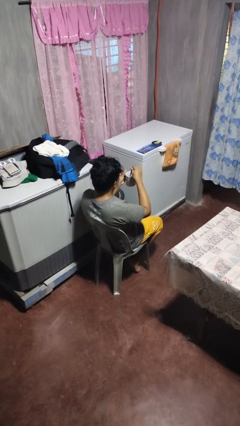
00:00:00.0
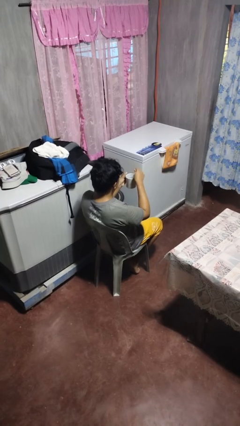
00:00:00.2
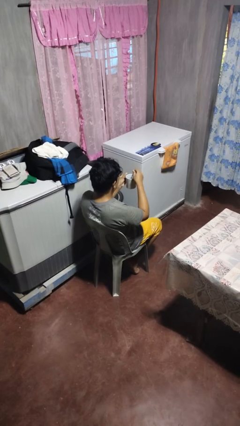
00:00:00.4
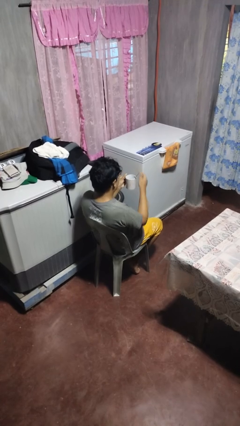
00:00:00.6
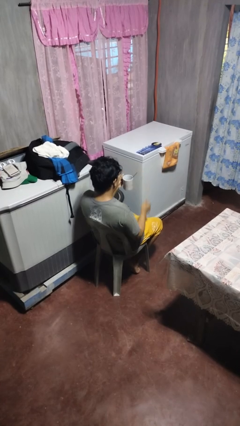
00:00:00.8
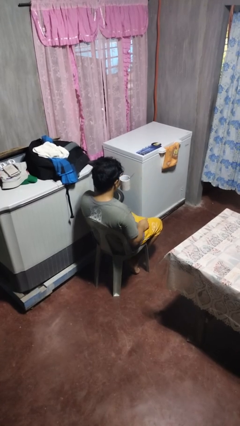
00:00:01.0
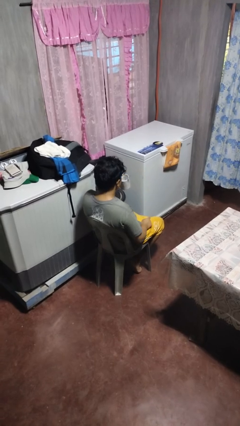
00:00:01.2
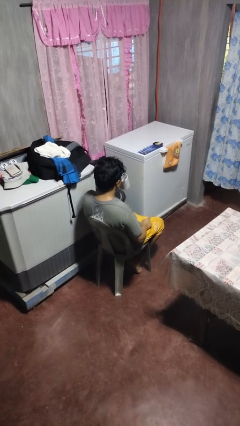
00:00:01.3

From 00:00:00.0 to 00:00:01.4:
person drinks from mug

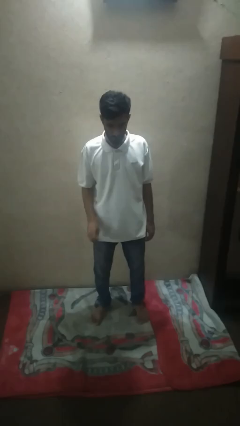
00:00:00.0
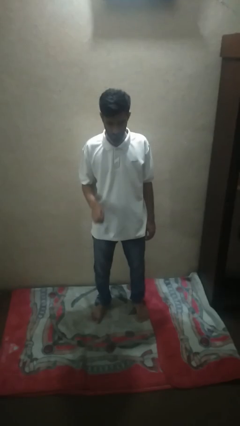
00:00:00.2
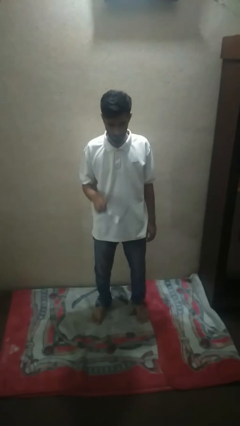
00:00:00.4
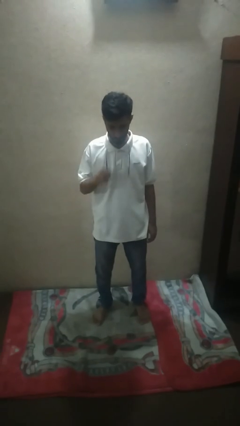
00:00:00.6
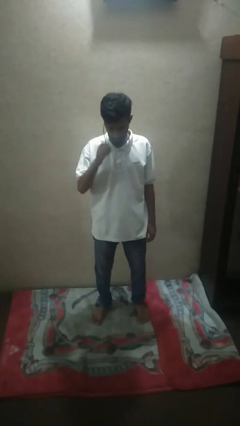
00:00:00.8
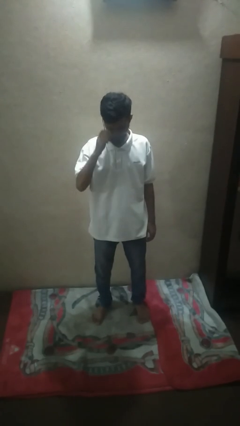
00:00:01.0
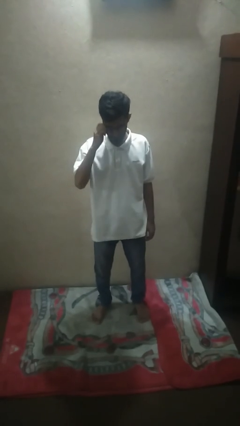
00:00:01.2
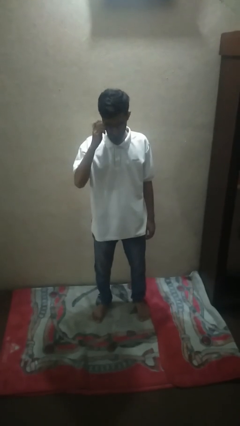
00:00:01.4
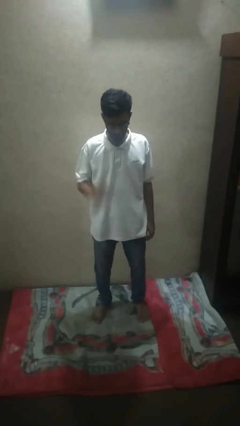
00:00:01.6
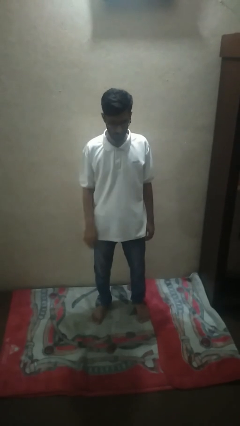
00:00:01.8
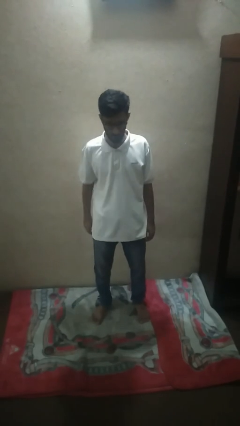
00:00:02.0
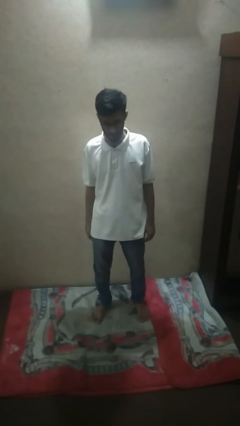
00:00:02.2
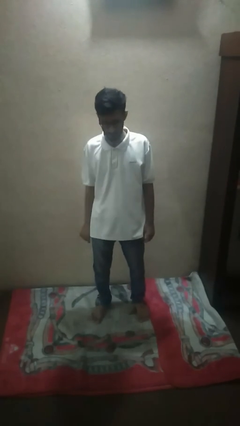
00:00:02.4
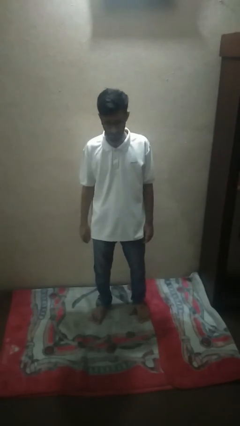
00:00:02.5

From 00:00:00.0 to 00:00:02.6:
person puts on glasses

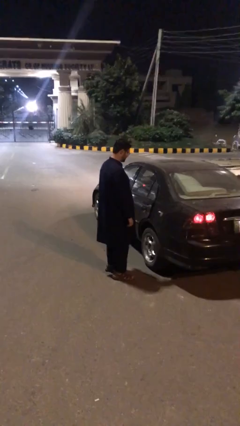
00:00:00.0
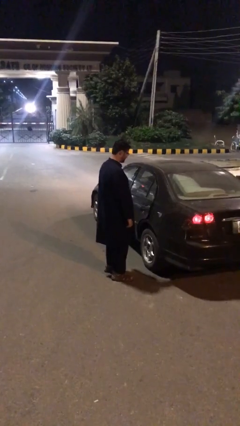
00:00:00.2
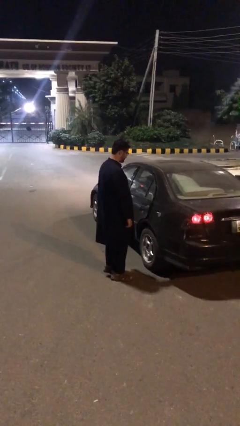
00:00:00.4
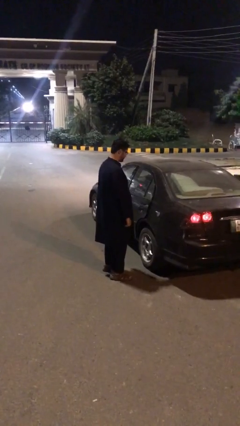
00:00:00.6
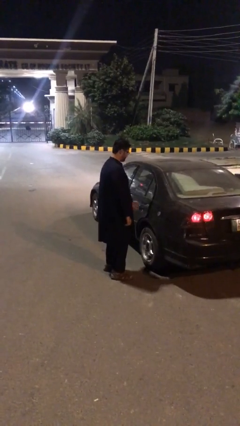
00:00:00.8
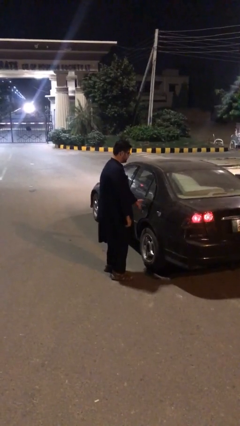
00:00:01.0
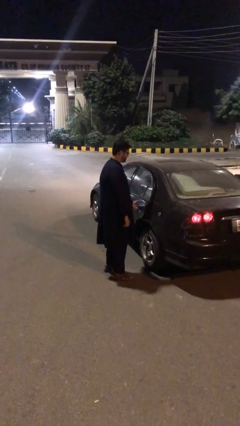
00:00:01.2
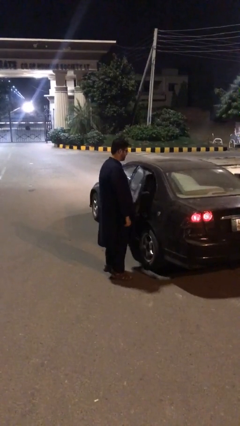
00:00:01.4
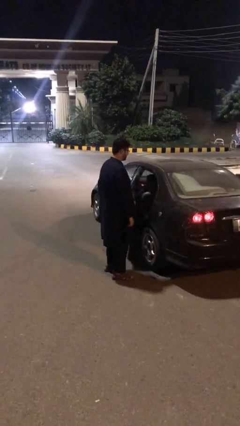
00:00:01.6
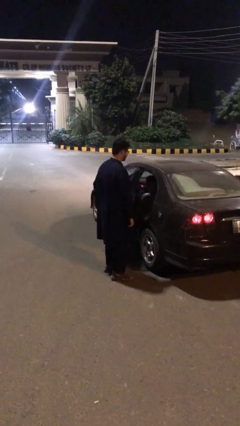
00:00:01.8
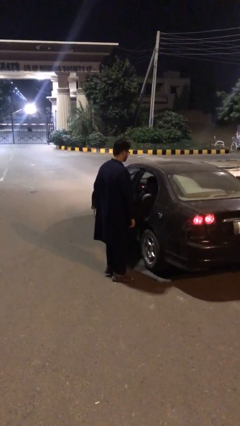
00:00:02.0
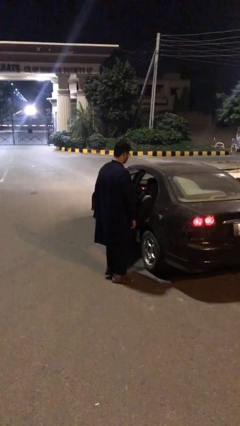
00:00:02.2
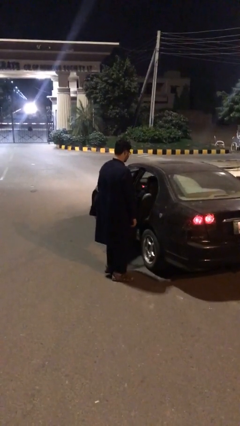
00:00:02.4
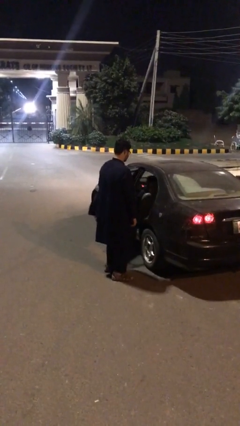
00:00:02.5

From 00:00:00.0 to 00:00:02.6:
person opens car door

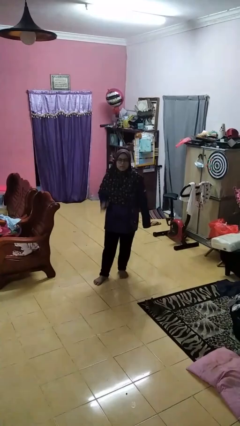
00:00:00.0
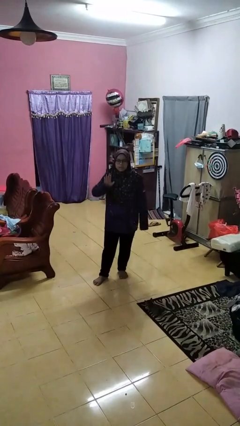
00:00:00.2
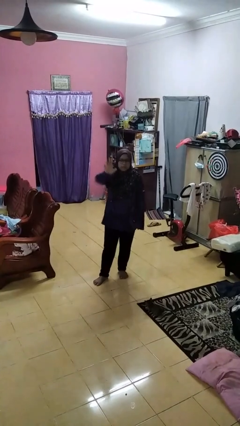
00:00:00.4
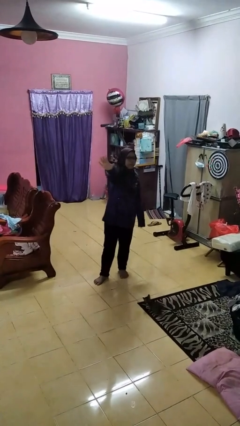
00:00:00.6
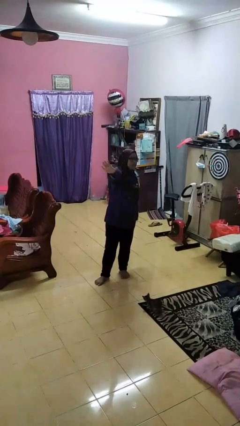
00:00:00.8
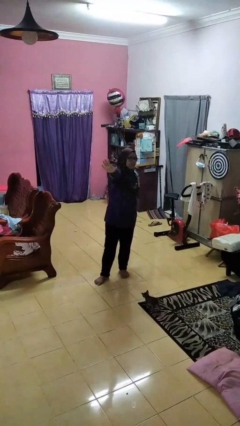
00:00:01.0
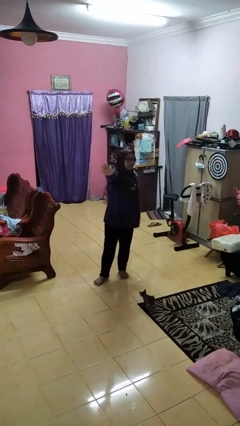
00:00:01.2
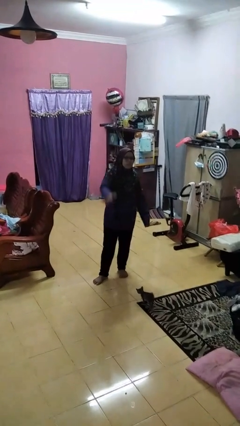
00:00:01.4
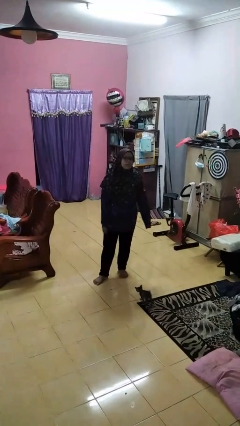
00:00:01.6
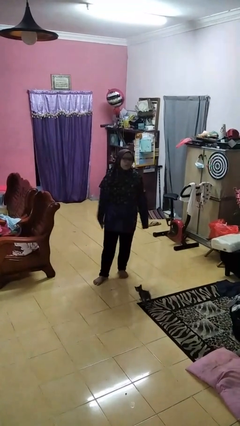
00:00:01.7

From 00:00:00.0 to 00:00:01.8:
person gestures stop

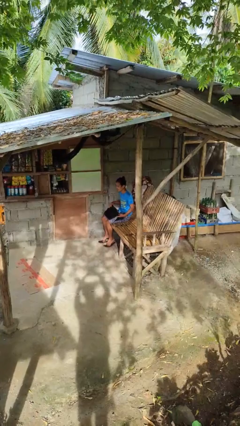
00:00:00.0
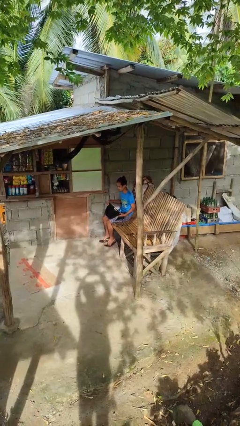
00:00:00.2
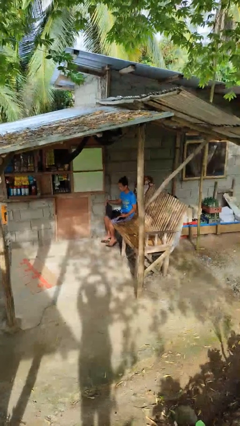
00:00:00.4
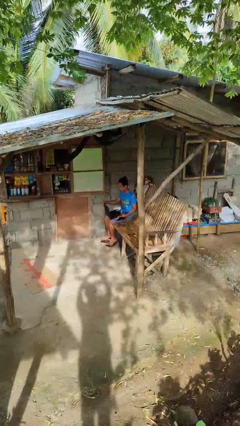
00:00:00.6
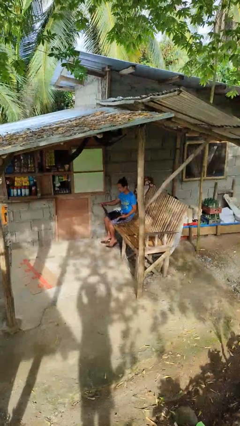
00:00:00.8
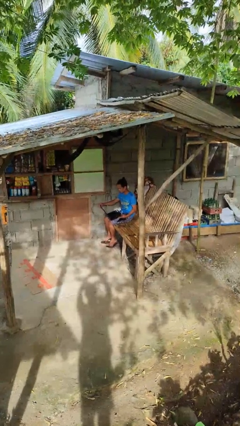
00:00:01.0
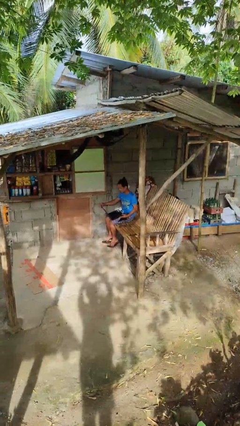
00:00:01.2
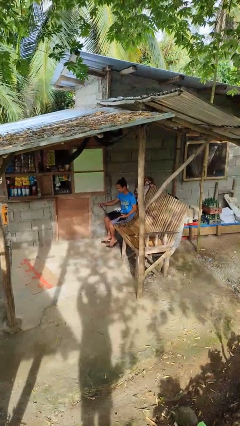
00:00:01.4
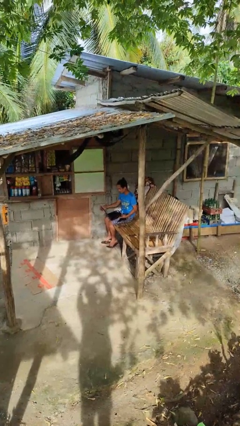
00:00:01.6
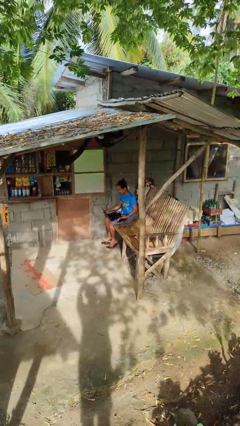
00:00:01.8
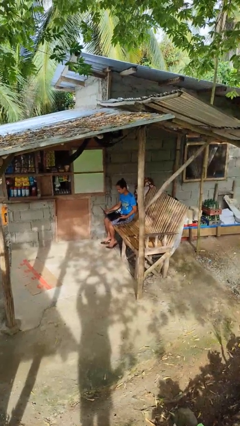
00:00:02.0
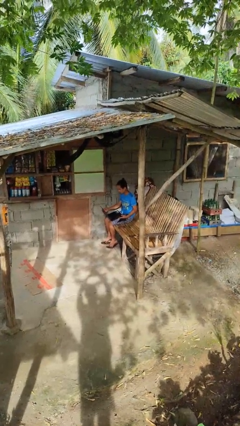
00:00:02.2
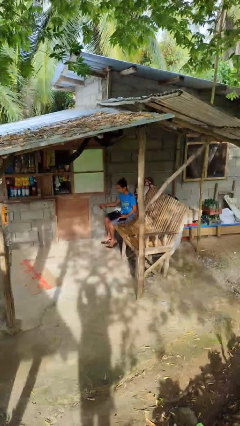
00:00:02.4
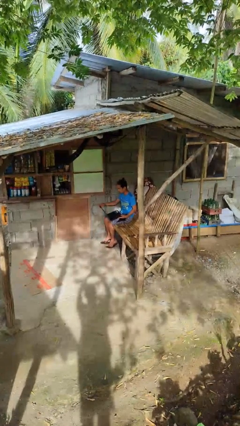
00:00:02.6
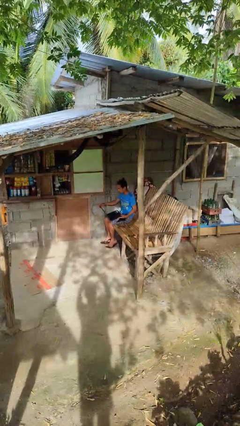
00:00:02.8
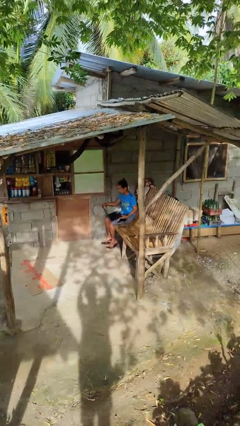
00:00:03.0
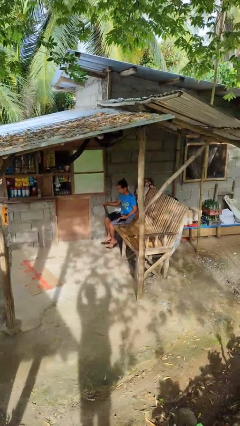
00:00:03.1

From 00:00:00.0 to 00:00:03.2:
person opens laptop

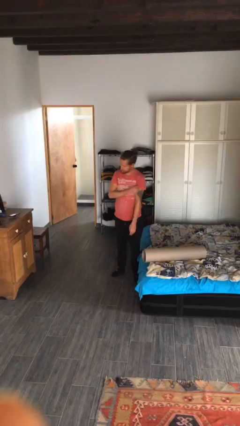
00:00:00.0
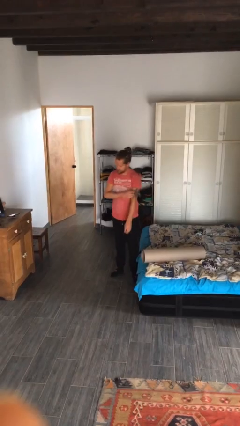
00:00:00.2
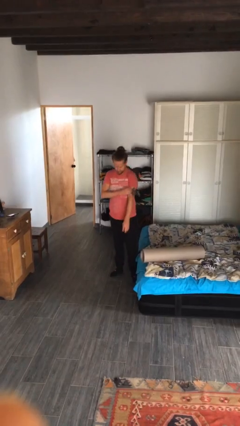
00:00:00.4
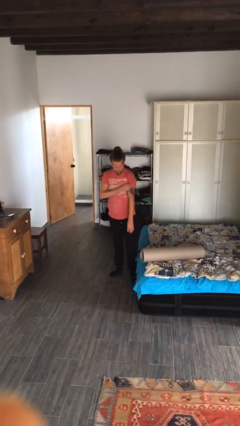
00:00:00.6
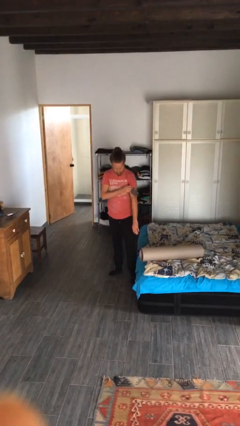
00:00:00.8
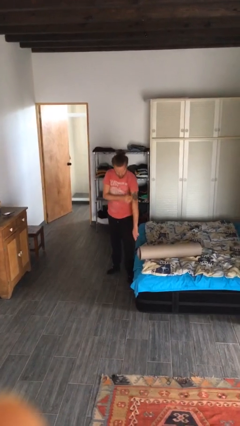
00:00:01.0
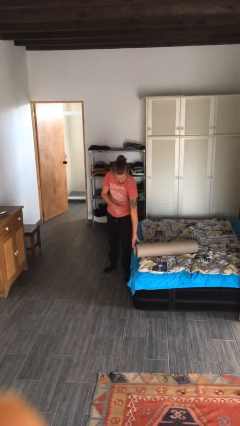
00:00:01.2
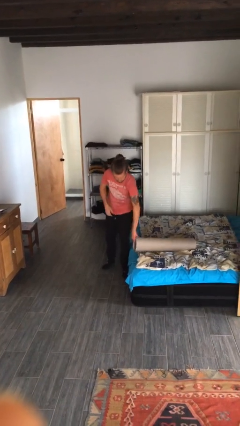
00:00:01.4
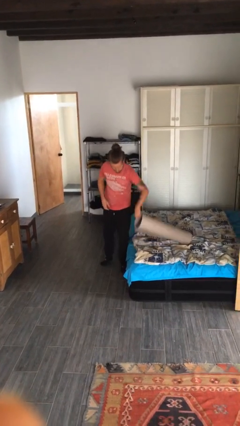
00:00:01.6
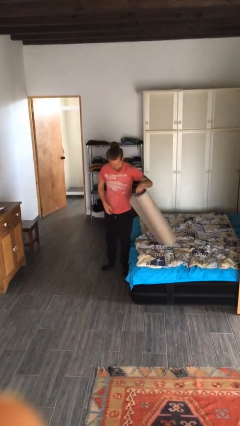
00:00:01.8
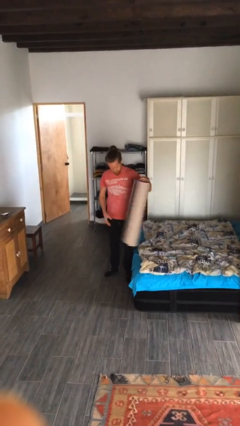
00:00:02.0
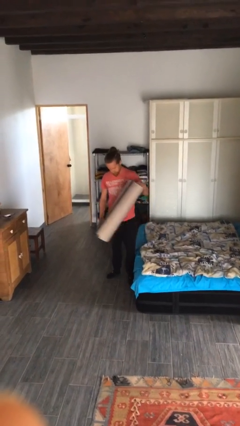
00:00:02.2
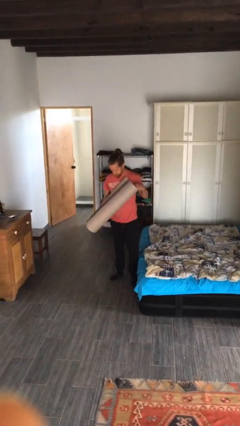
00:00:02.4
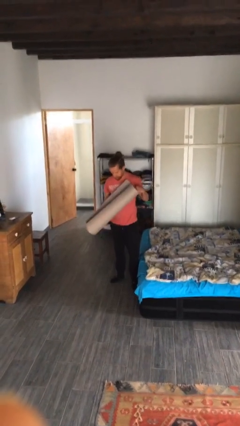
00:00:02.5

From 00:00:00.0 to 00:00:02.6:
person picks up object from bed

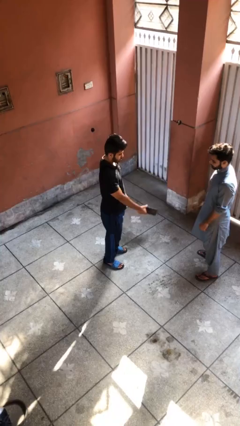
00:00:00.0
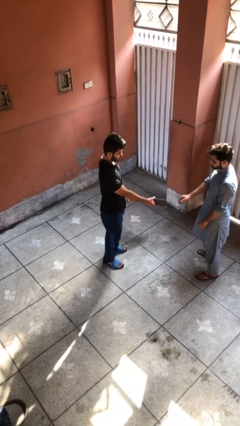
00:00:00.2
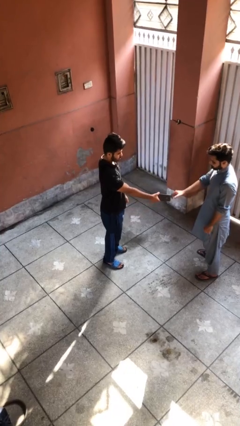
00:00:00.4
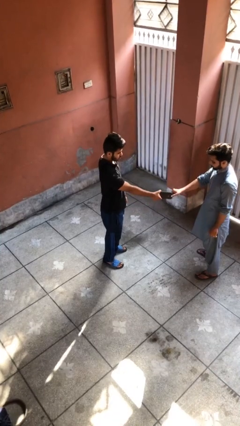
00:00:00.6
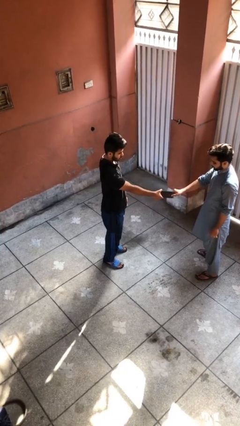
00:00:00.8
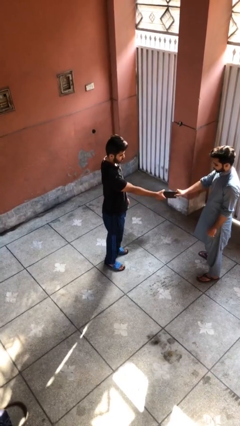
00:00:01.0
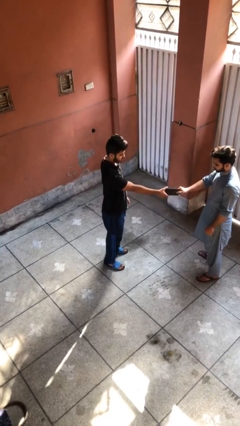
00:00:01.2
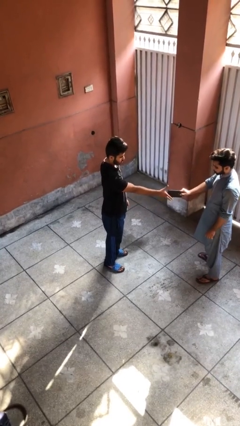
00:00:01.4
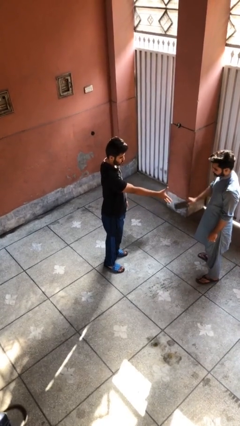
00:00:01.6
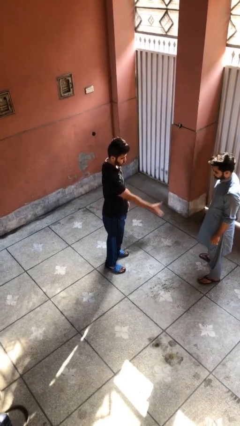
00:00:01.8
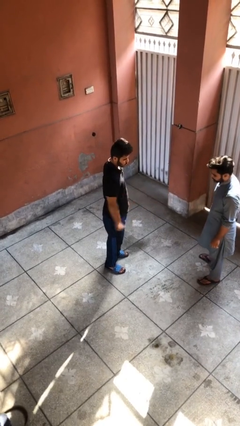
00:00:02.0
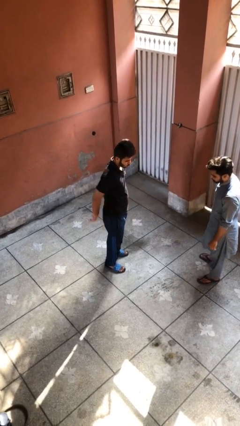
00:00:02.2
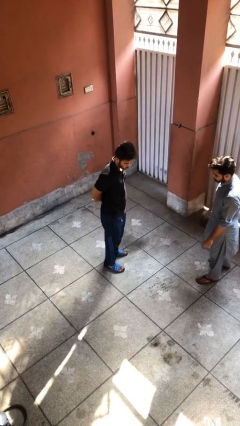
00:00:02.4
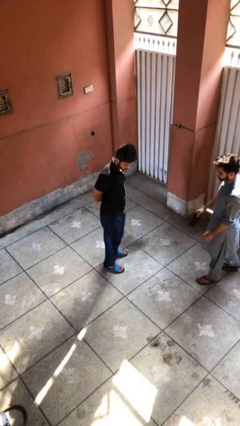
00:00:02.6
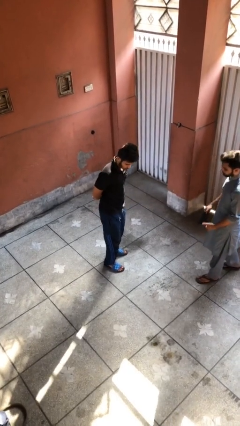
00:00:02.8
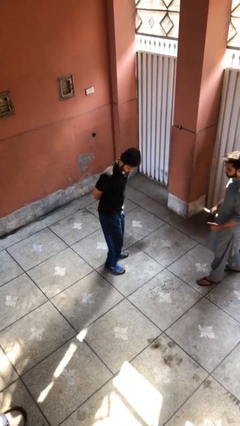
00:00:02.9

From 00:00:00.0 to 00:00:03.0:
person transfers object to person
